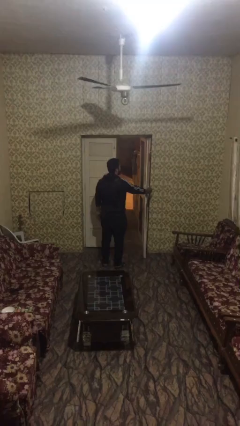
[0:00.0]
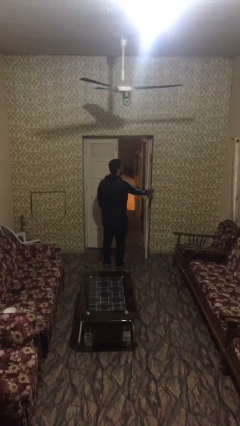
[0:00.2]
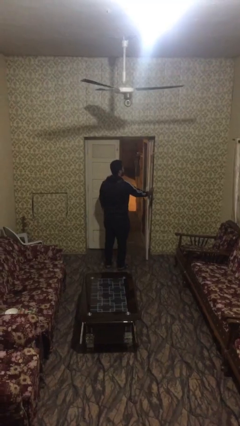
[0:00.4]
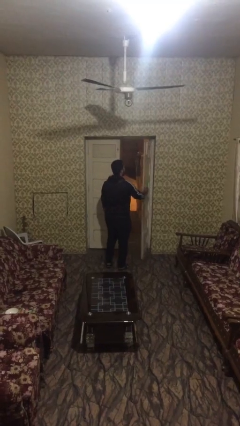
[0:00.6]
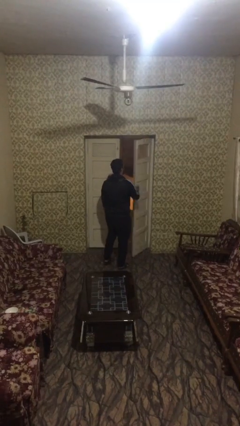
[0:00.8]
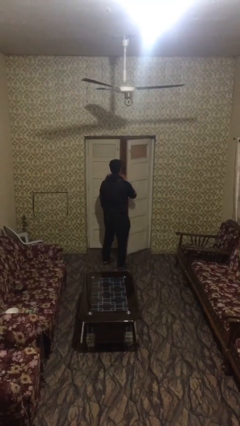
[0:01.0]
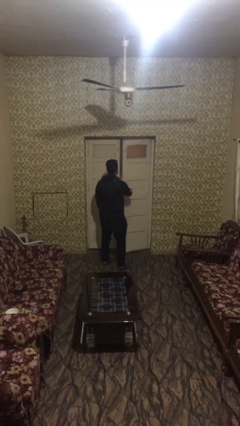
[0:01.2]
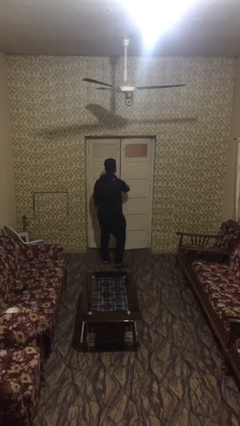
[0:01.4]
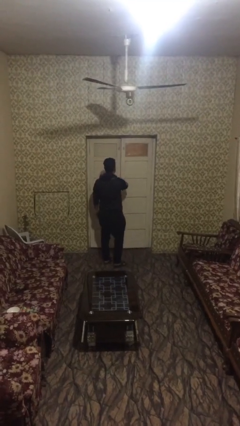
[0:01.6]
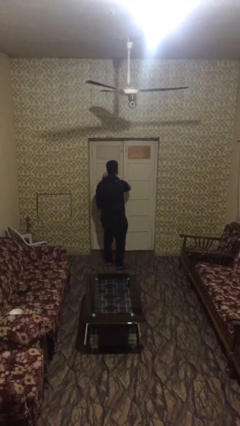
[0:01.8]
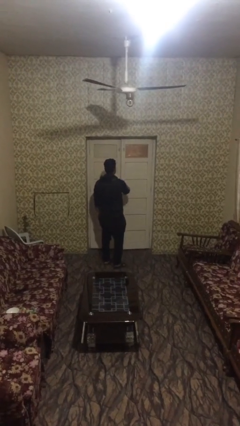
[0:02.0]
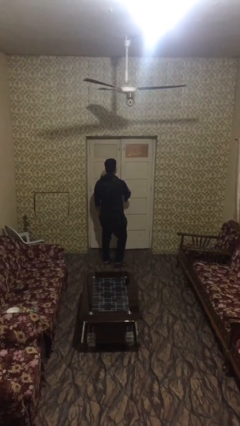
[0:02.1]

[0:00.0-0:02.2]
person closes facility door

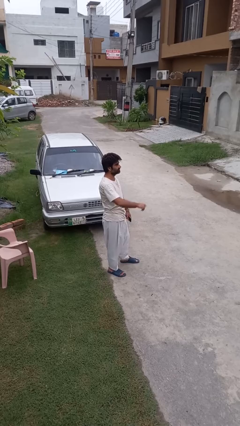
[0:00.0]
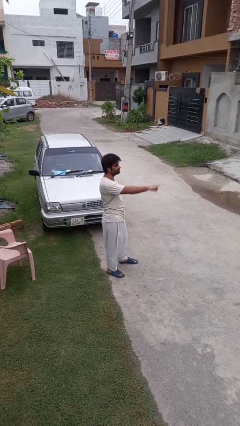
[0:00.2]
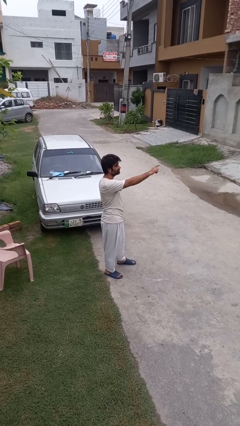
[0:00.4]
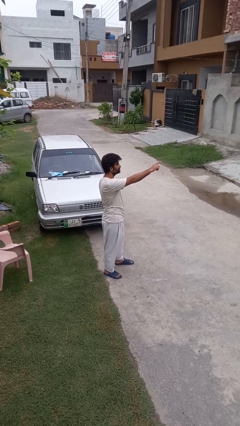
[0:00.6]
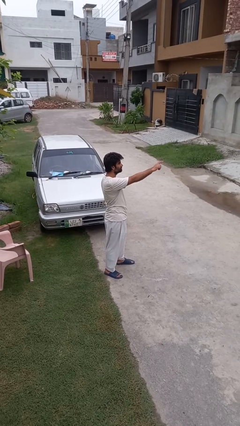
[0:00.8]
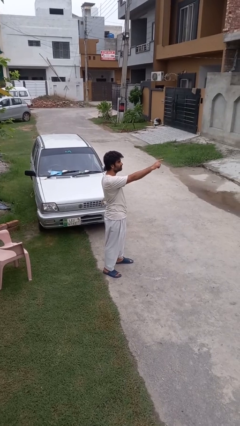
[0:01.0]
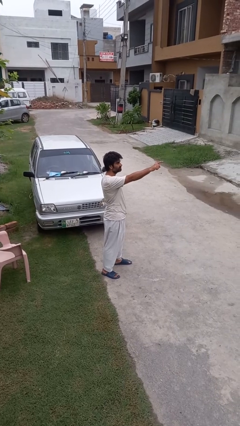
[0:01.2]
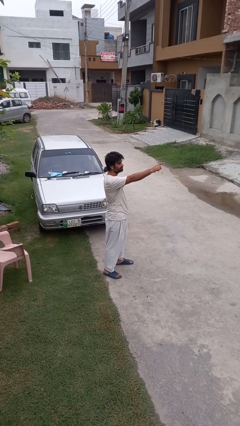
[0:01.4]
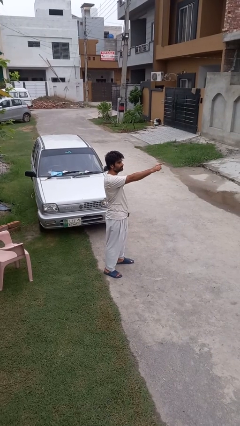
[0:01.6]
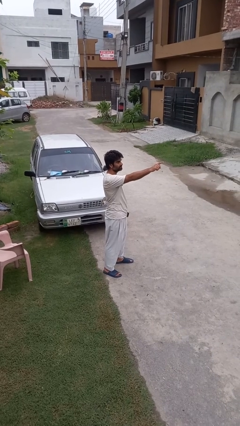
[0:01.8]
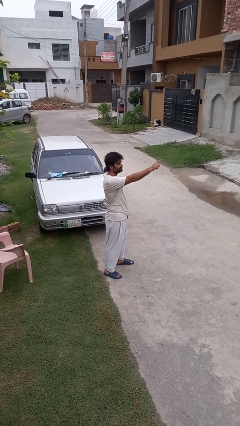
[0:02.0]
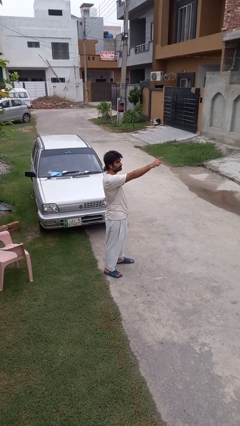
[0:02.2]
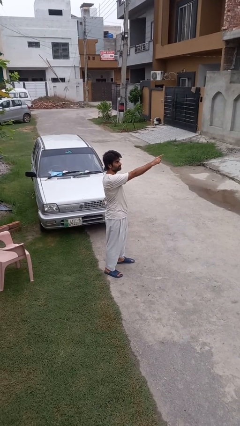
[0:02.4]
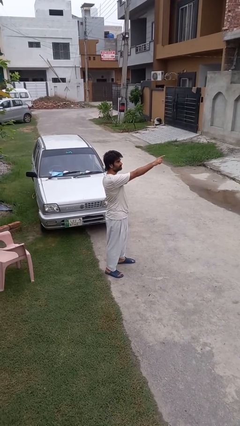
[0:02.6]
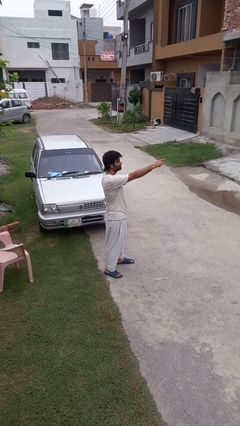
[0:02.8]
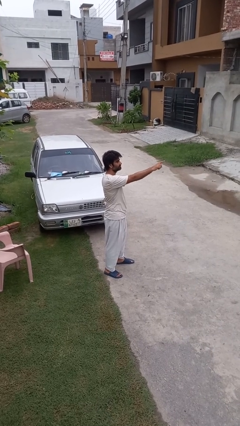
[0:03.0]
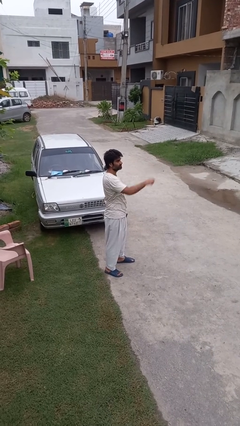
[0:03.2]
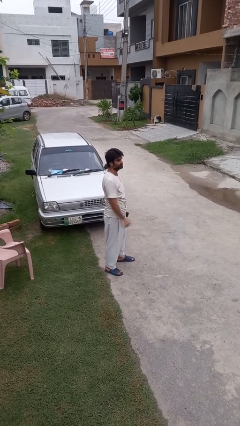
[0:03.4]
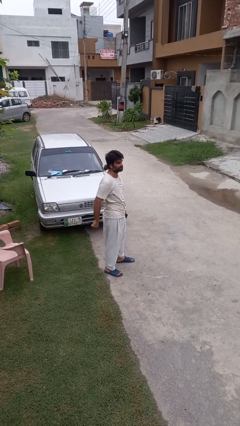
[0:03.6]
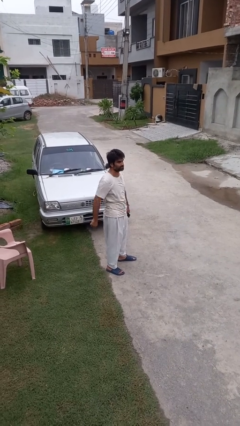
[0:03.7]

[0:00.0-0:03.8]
person points at person

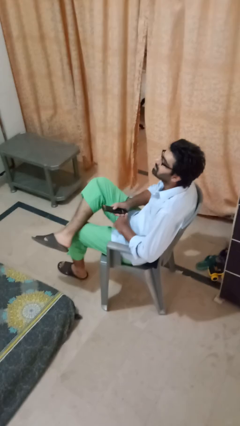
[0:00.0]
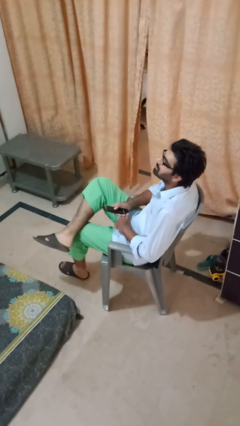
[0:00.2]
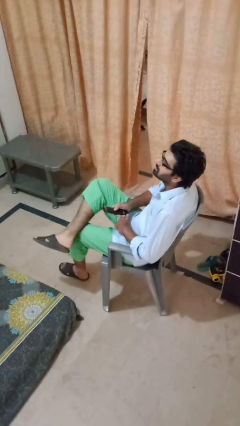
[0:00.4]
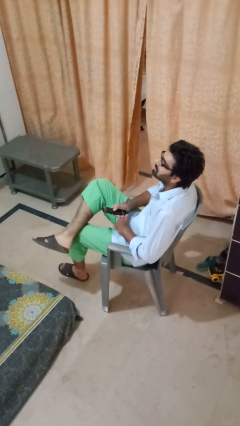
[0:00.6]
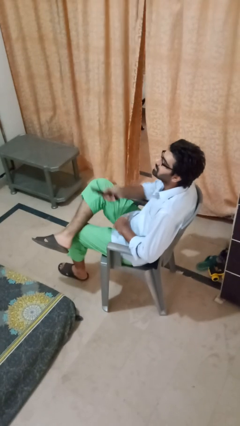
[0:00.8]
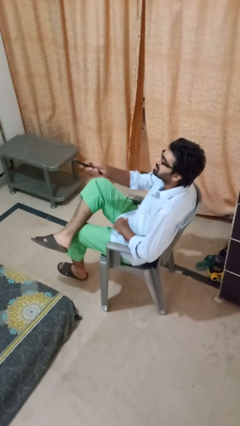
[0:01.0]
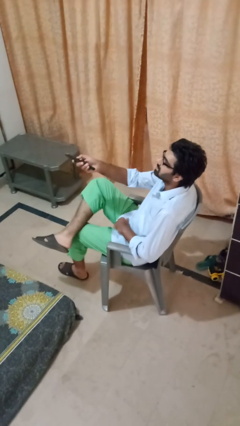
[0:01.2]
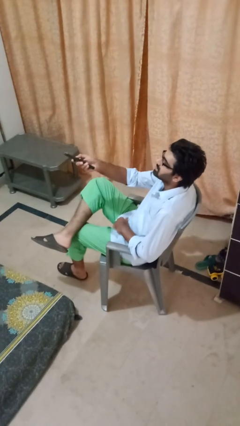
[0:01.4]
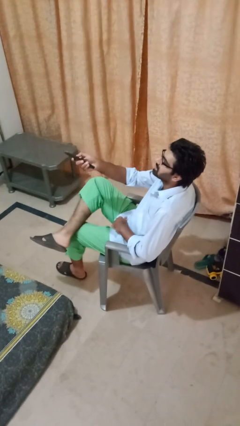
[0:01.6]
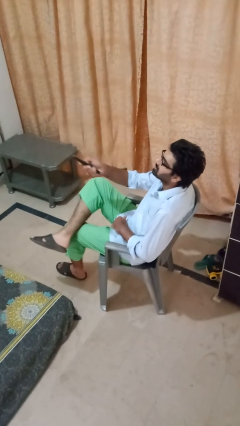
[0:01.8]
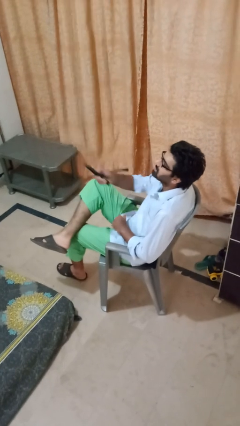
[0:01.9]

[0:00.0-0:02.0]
person uses television remote

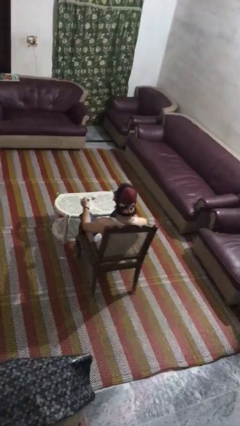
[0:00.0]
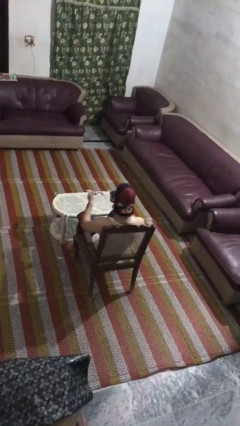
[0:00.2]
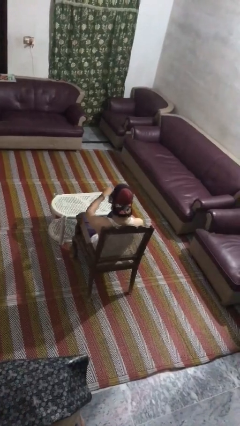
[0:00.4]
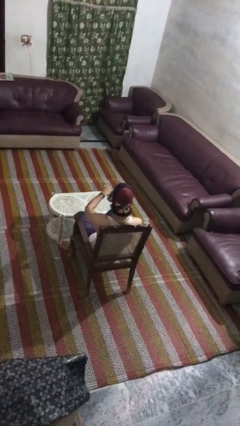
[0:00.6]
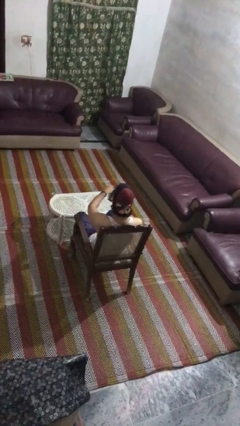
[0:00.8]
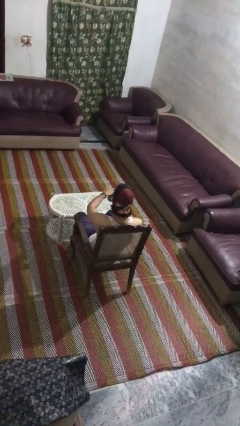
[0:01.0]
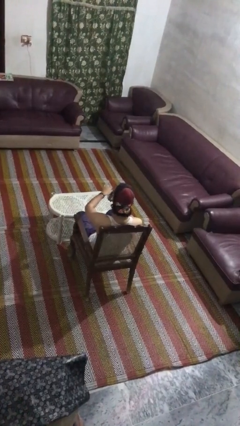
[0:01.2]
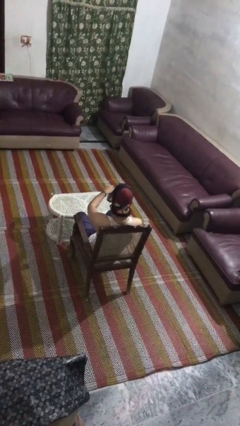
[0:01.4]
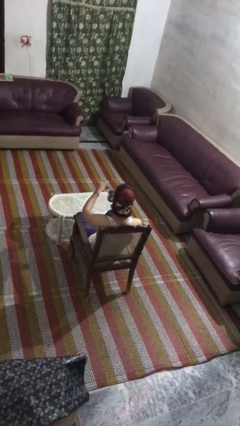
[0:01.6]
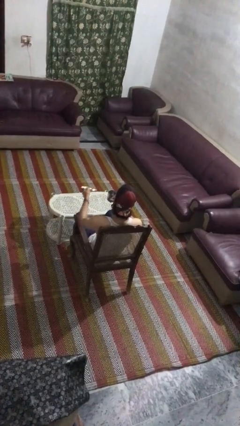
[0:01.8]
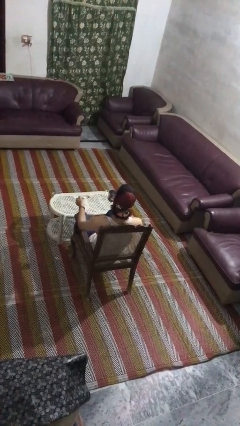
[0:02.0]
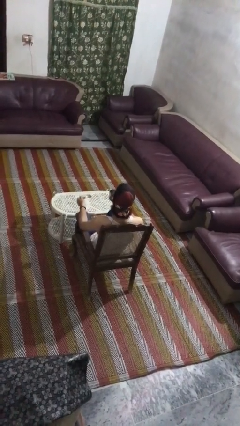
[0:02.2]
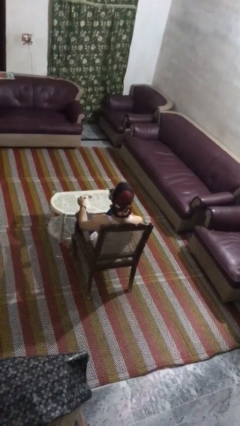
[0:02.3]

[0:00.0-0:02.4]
person stirs mug

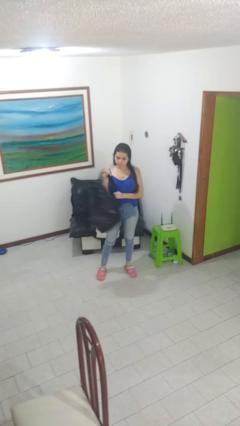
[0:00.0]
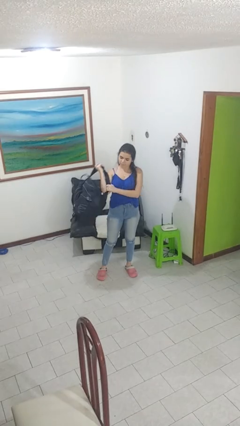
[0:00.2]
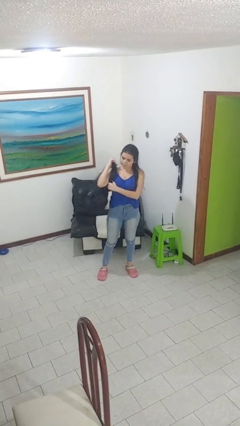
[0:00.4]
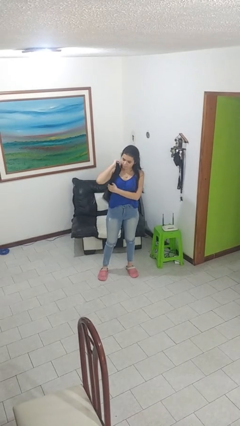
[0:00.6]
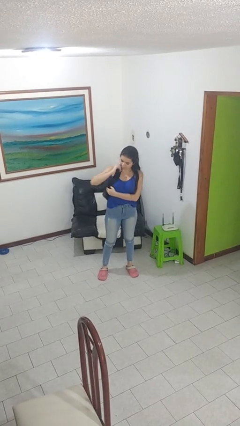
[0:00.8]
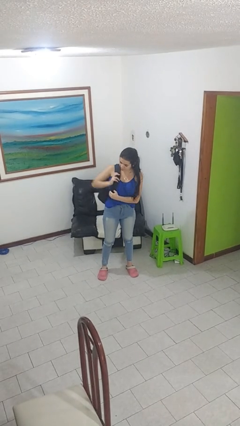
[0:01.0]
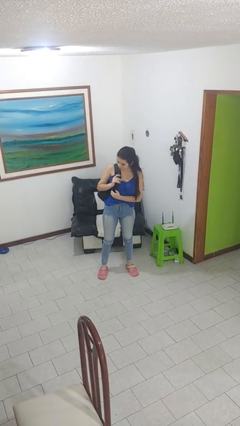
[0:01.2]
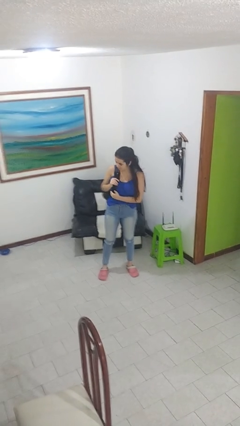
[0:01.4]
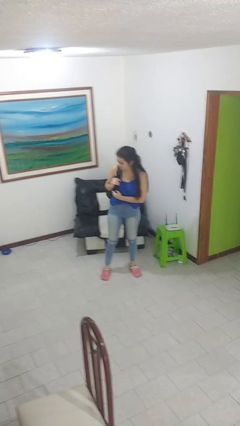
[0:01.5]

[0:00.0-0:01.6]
person puts on backpack

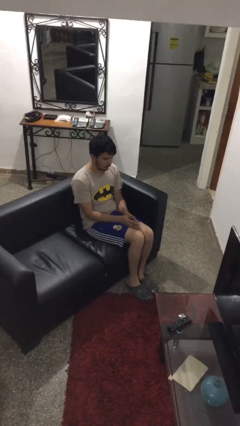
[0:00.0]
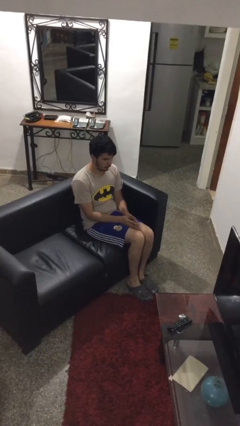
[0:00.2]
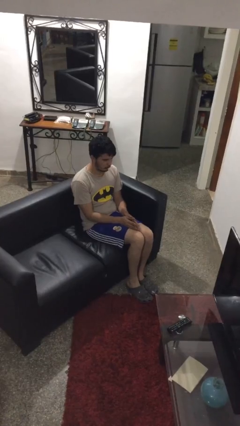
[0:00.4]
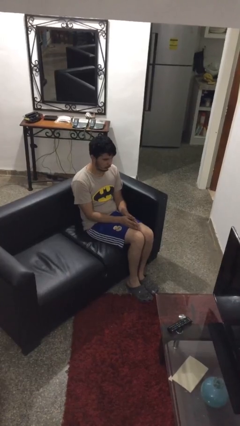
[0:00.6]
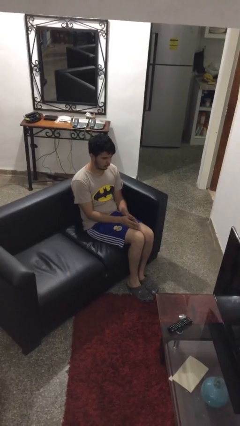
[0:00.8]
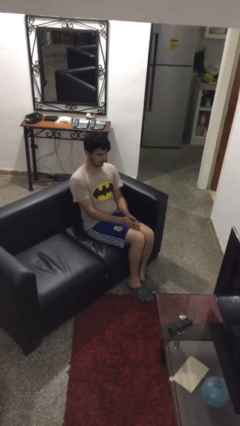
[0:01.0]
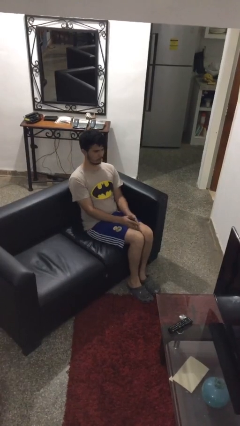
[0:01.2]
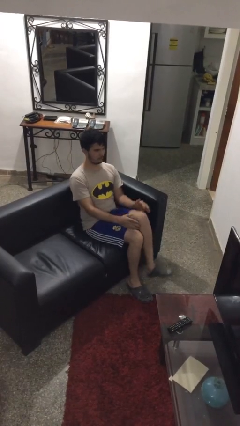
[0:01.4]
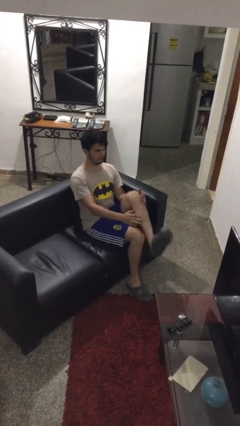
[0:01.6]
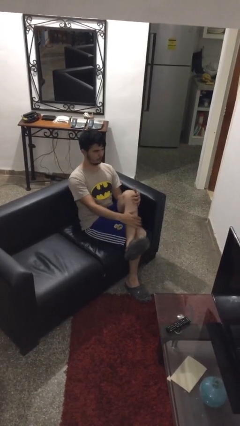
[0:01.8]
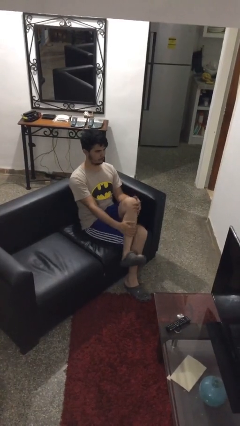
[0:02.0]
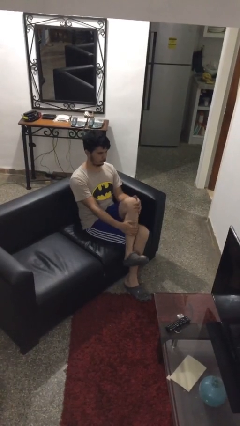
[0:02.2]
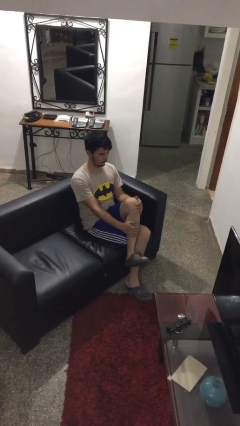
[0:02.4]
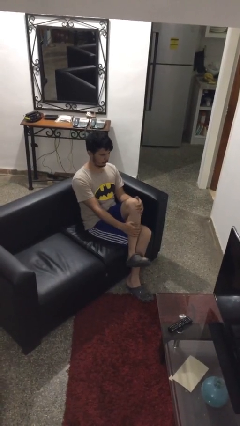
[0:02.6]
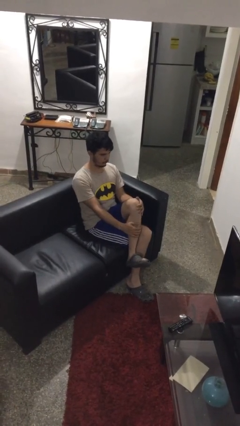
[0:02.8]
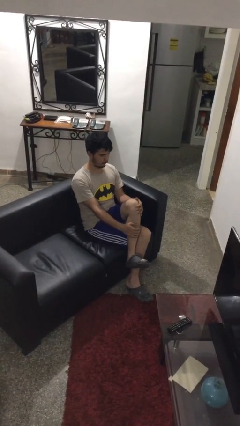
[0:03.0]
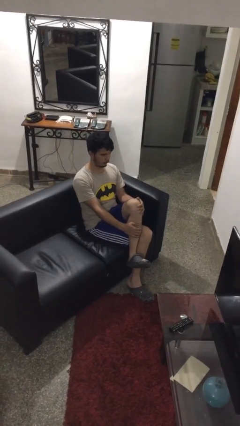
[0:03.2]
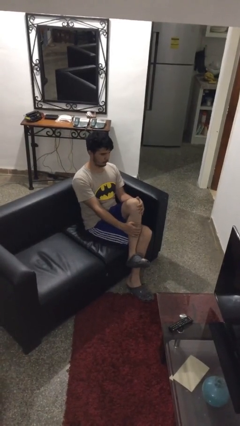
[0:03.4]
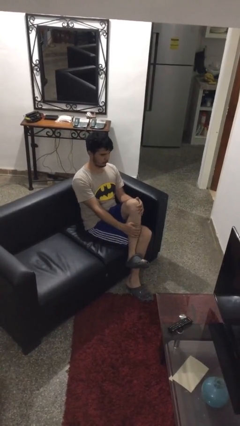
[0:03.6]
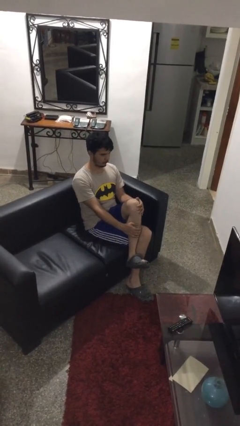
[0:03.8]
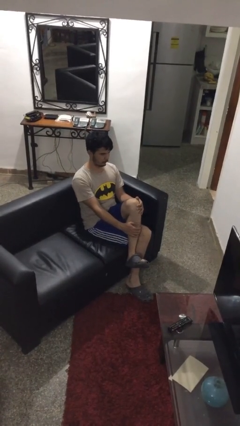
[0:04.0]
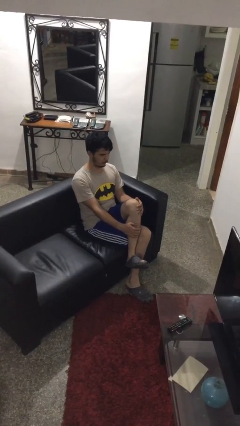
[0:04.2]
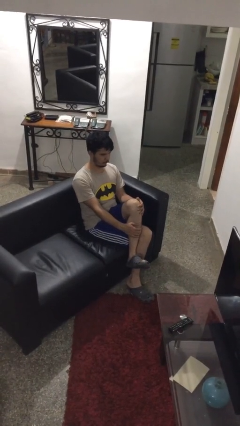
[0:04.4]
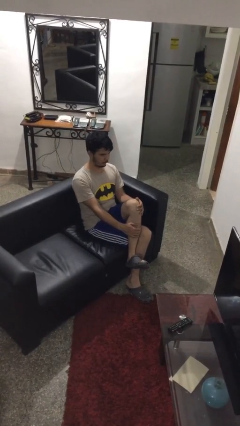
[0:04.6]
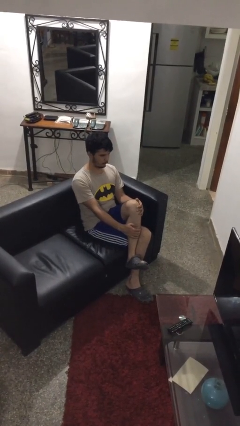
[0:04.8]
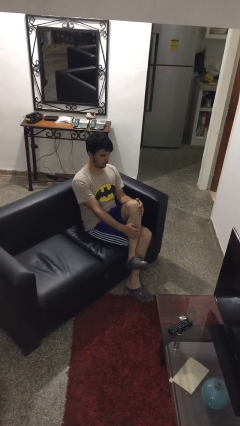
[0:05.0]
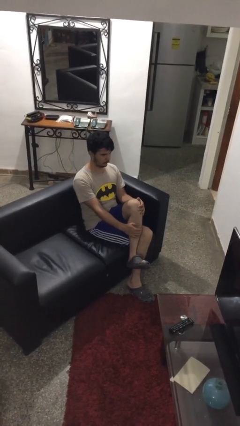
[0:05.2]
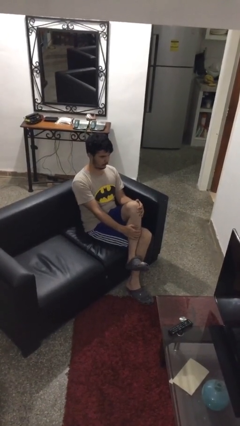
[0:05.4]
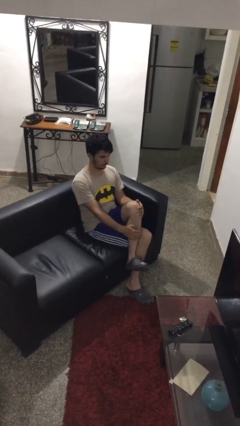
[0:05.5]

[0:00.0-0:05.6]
person crosses legs
